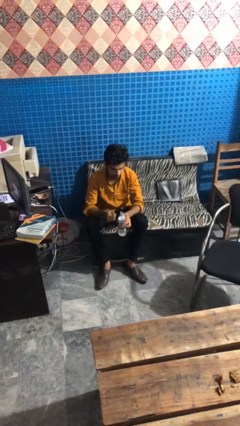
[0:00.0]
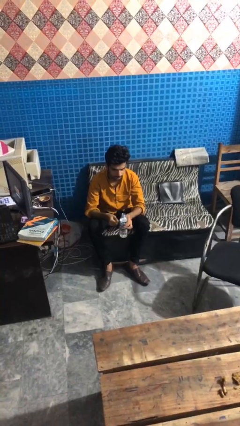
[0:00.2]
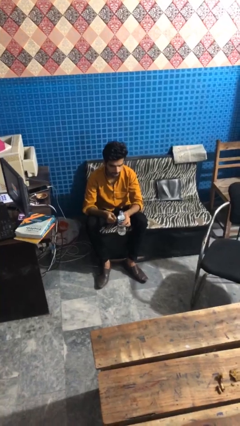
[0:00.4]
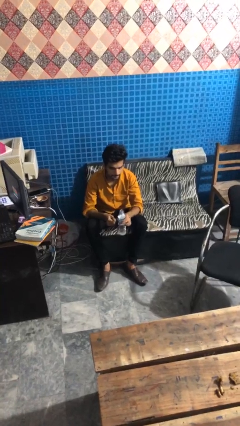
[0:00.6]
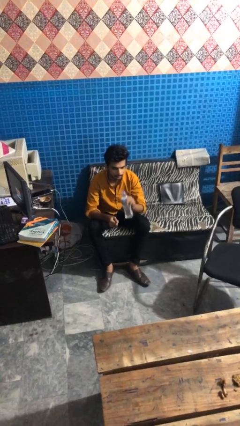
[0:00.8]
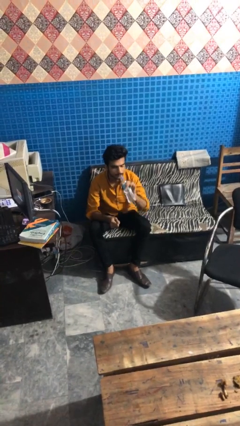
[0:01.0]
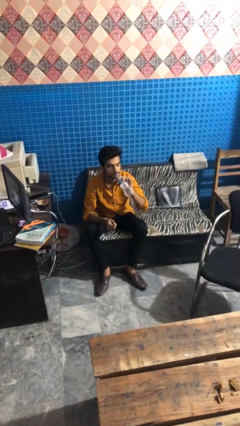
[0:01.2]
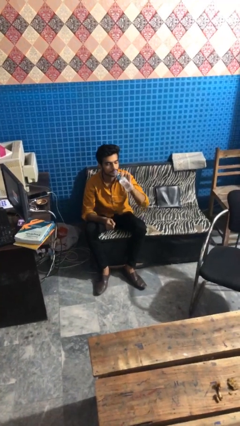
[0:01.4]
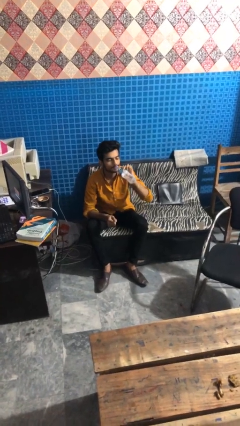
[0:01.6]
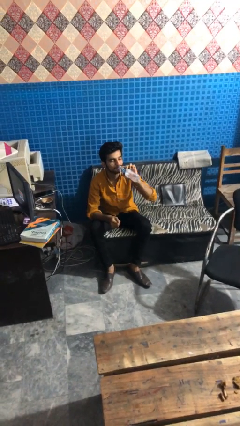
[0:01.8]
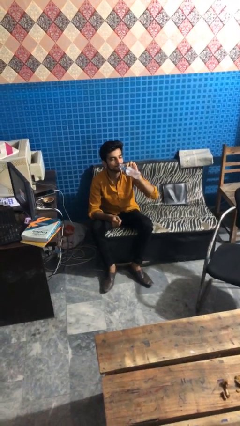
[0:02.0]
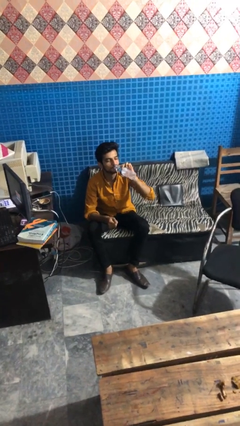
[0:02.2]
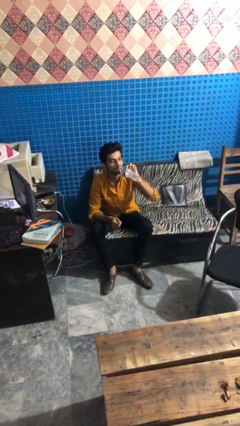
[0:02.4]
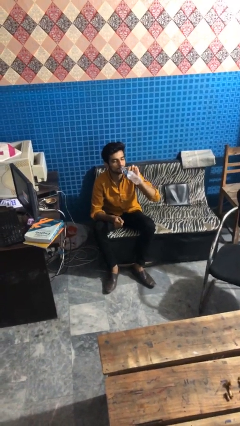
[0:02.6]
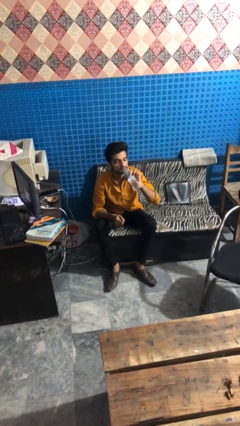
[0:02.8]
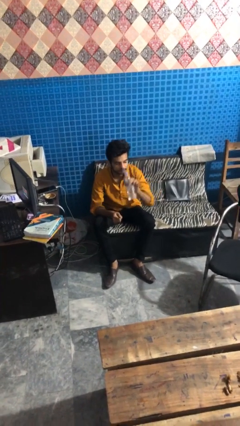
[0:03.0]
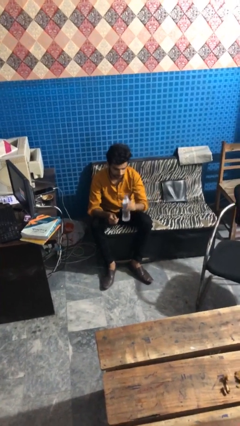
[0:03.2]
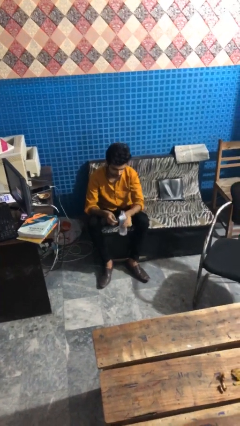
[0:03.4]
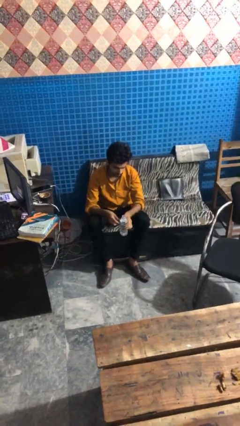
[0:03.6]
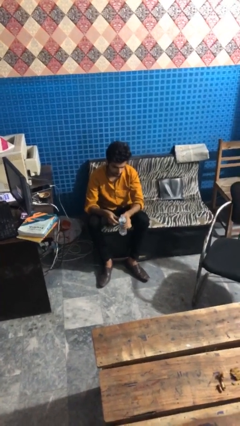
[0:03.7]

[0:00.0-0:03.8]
person drinks from bottle

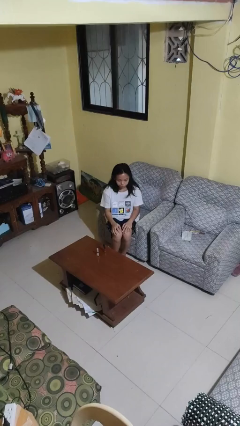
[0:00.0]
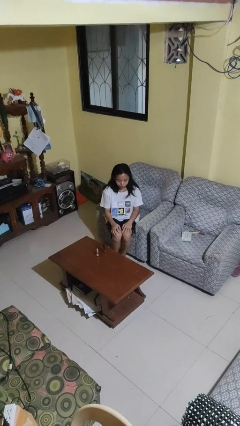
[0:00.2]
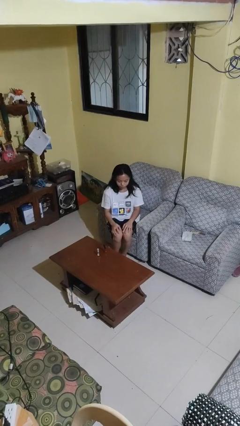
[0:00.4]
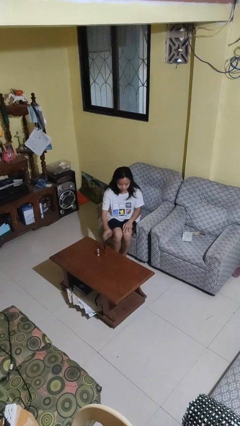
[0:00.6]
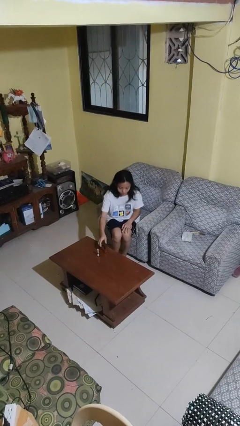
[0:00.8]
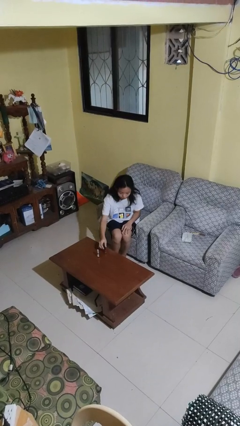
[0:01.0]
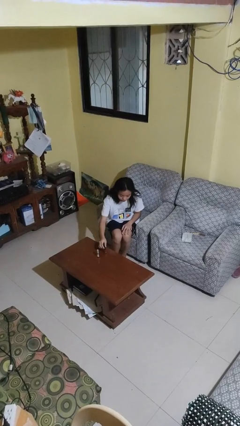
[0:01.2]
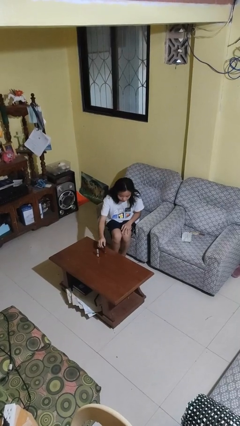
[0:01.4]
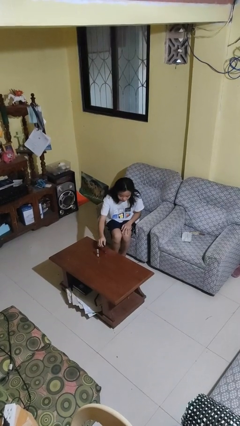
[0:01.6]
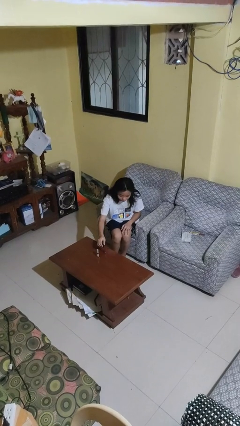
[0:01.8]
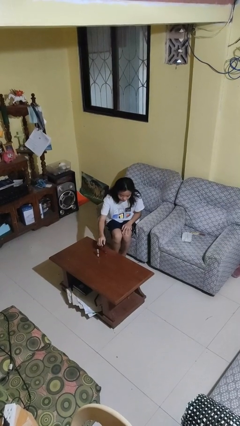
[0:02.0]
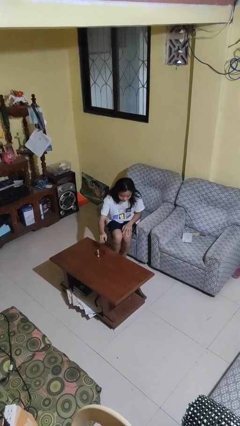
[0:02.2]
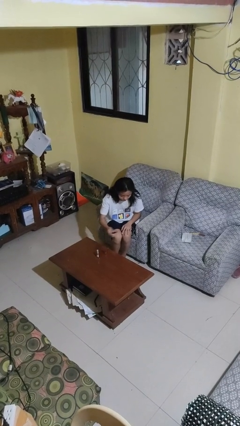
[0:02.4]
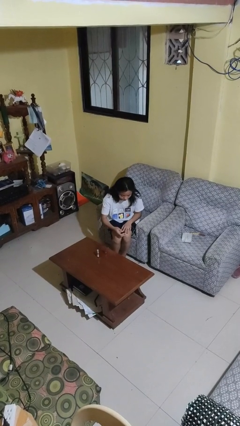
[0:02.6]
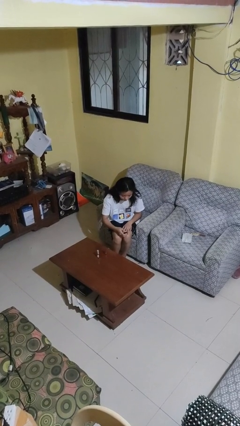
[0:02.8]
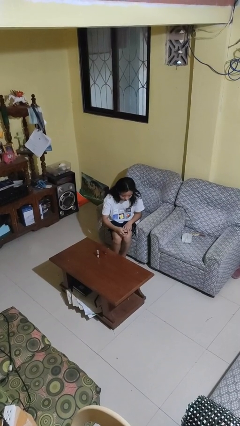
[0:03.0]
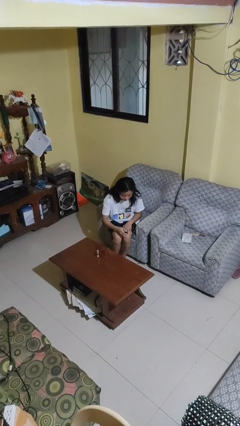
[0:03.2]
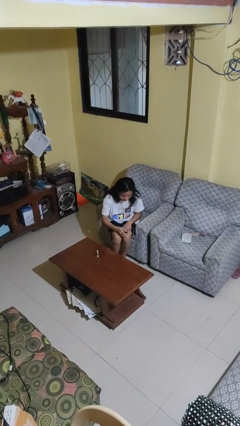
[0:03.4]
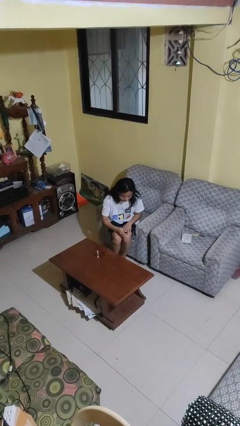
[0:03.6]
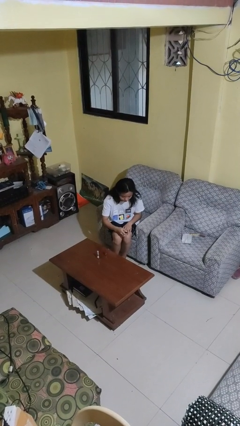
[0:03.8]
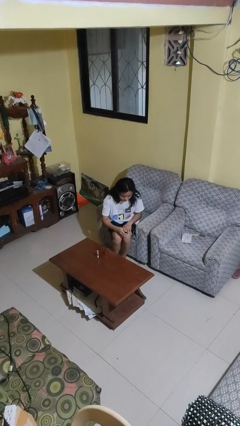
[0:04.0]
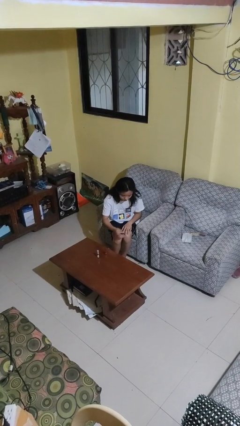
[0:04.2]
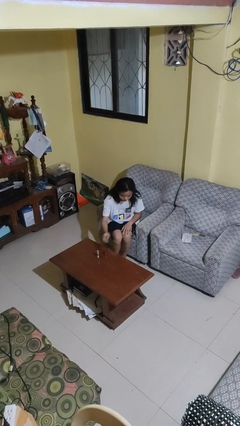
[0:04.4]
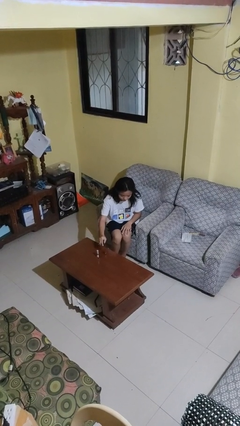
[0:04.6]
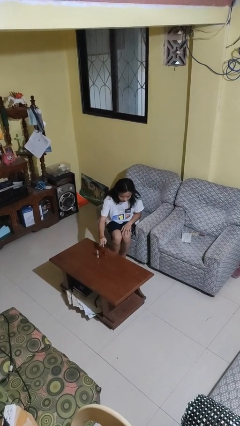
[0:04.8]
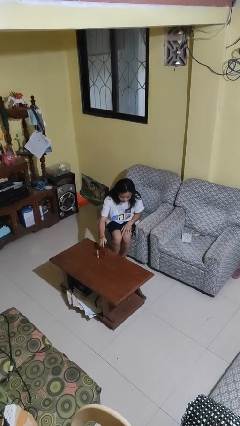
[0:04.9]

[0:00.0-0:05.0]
person paints fingernails

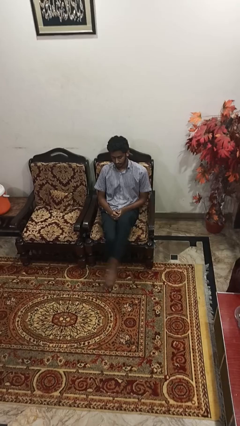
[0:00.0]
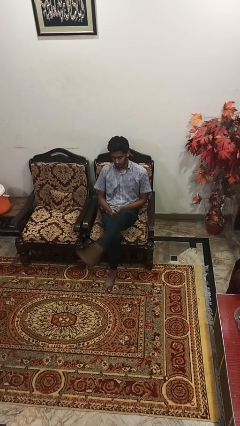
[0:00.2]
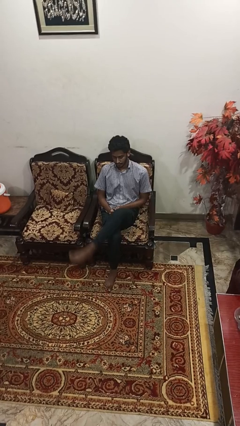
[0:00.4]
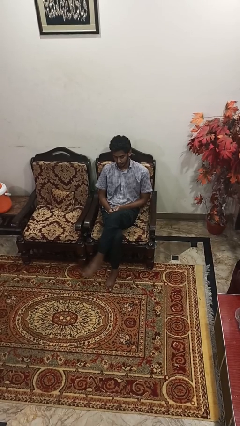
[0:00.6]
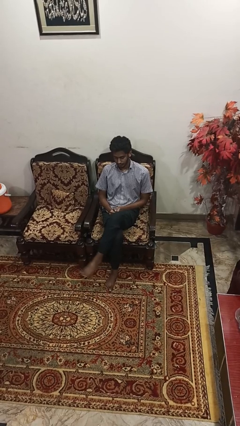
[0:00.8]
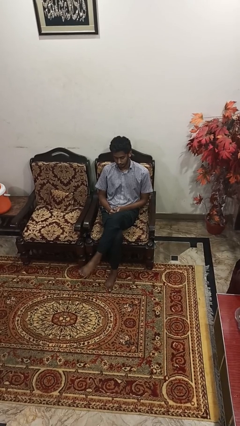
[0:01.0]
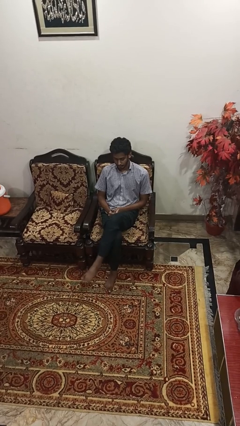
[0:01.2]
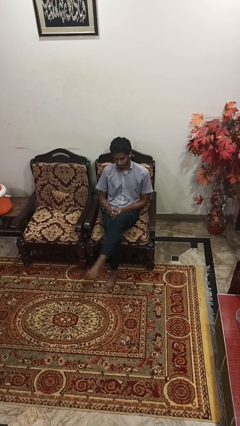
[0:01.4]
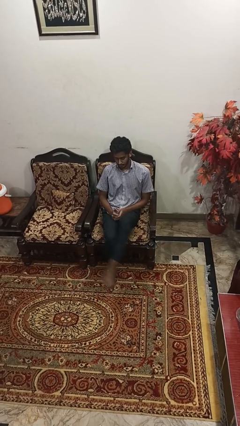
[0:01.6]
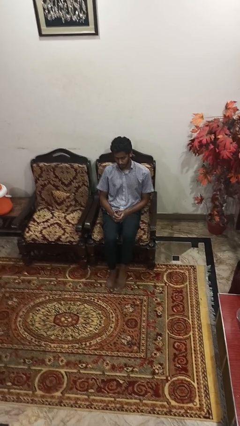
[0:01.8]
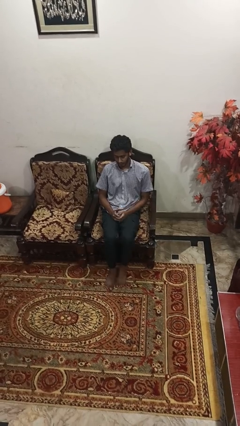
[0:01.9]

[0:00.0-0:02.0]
person crosses legs

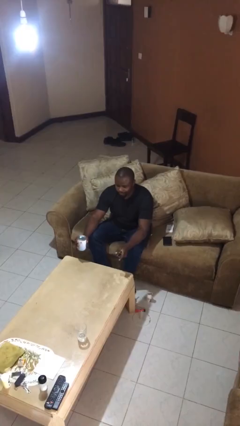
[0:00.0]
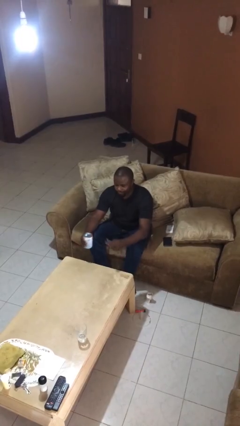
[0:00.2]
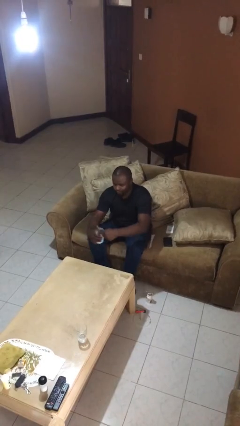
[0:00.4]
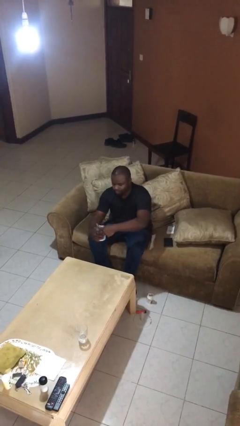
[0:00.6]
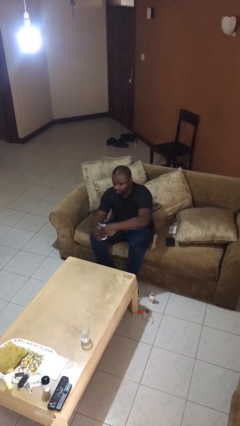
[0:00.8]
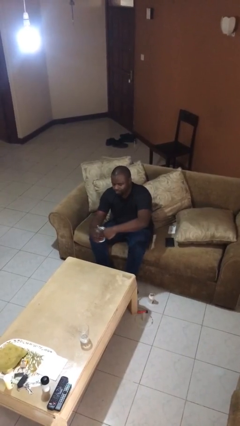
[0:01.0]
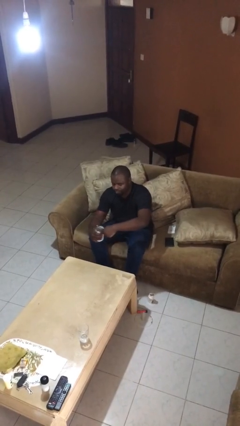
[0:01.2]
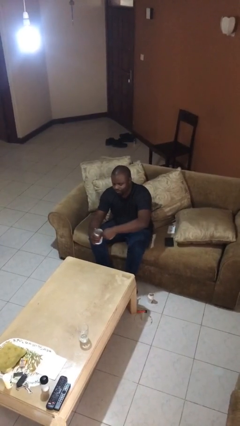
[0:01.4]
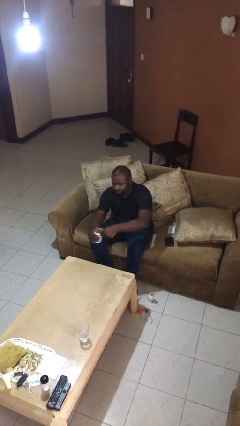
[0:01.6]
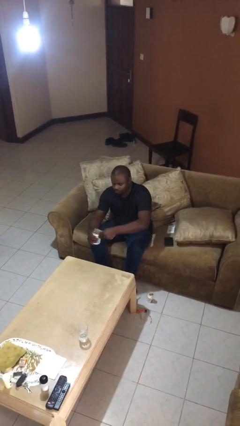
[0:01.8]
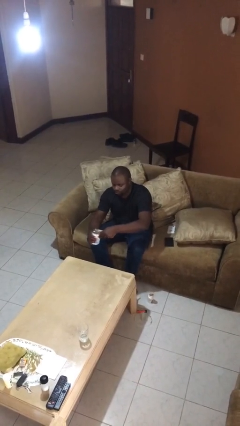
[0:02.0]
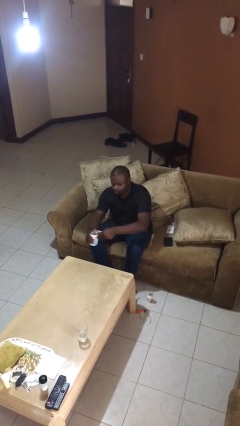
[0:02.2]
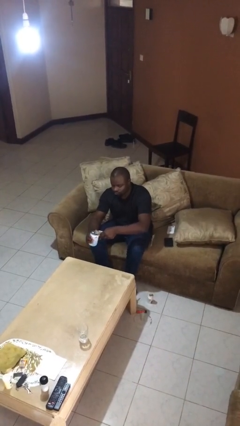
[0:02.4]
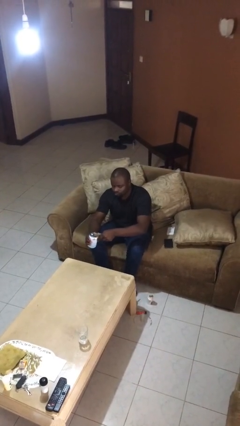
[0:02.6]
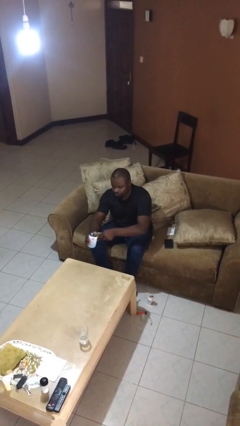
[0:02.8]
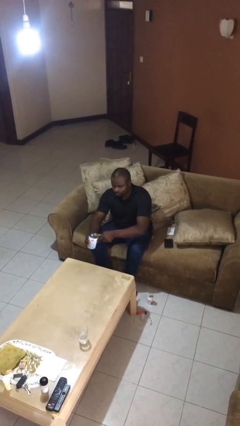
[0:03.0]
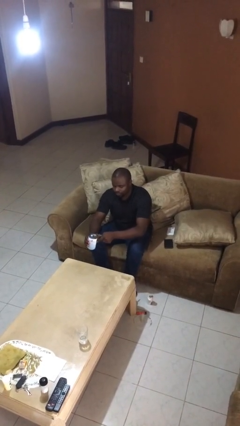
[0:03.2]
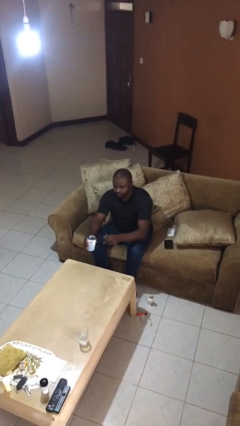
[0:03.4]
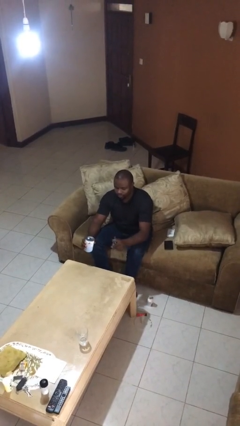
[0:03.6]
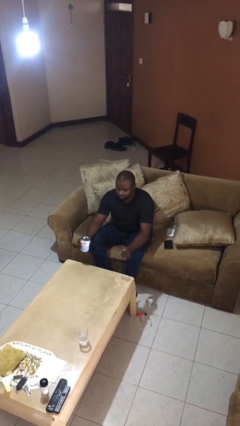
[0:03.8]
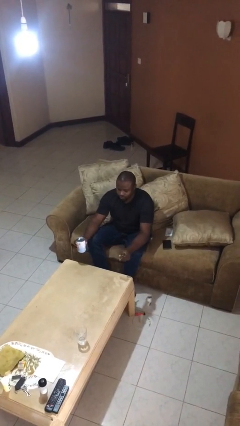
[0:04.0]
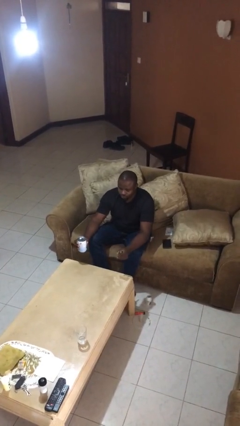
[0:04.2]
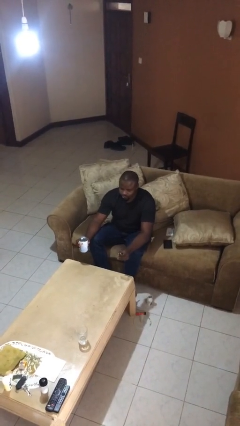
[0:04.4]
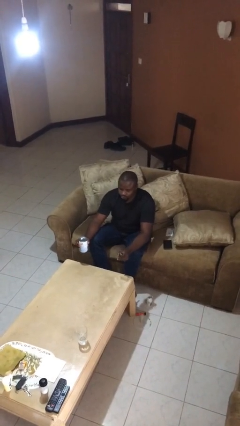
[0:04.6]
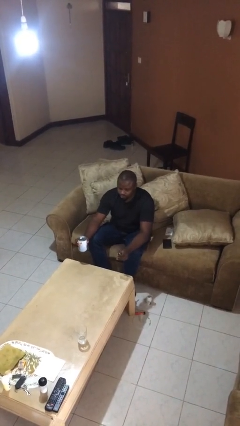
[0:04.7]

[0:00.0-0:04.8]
person opens can with can opener

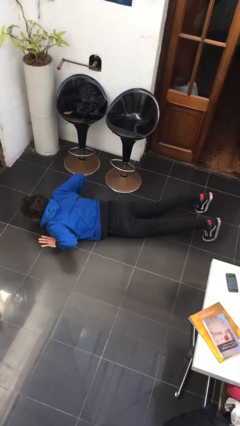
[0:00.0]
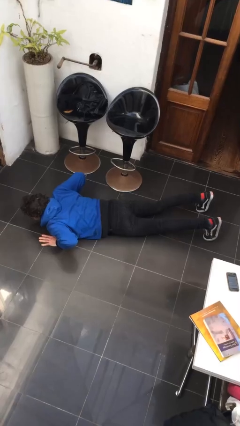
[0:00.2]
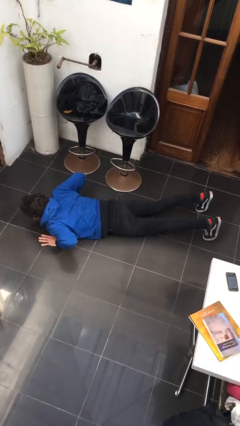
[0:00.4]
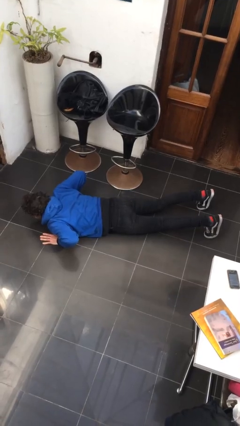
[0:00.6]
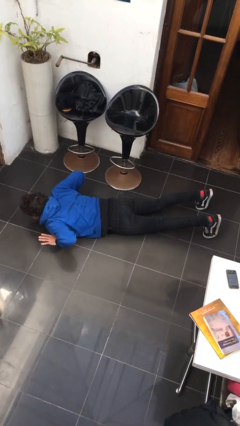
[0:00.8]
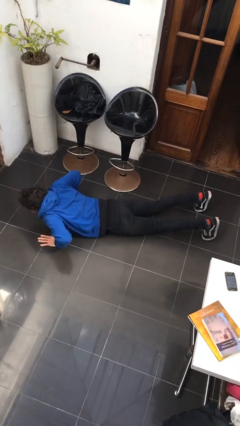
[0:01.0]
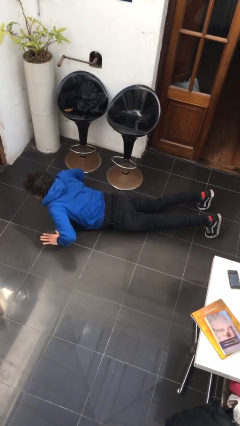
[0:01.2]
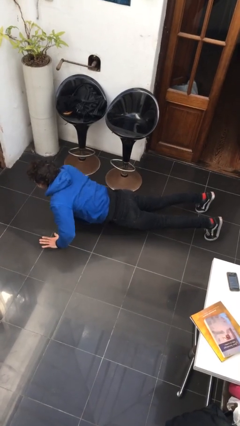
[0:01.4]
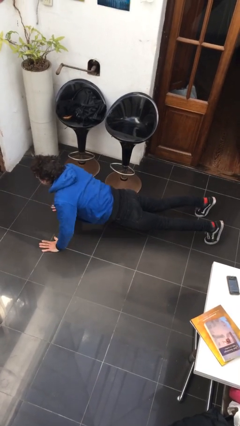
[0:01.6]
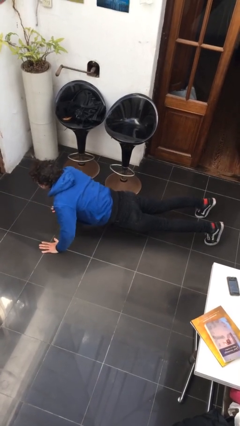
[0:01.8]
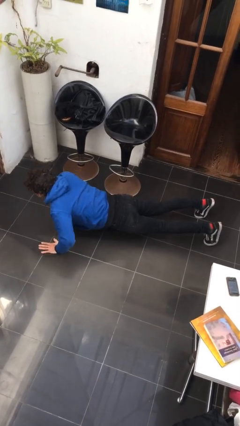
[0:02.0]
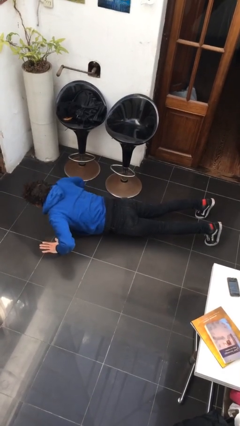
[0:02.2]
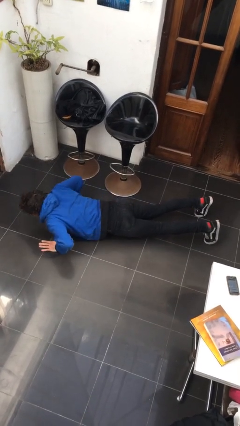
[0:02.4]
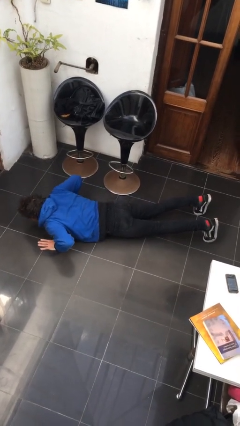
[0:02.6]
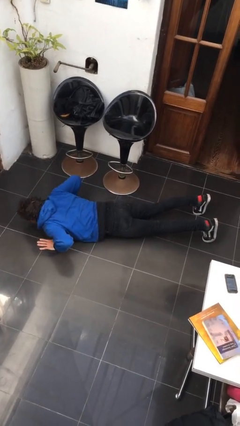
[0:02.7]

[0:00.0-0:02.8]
person exercises with pushup
